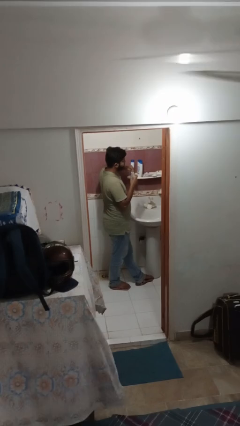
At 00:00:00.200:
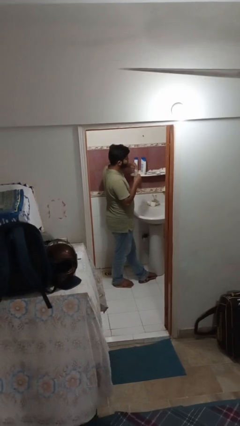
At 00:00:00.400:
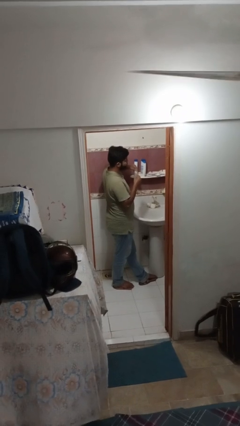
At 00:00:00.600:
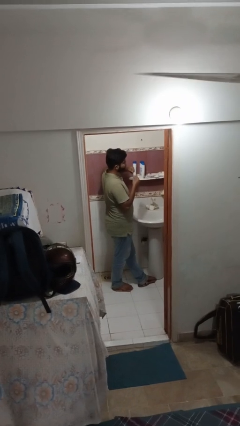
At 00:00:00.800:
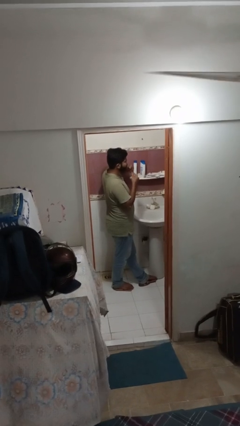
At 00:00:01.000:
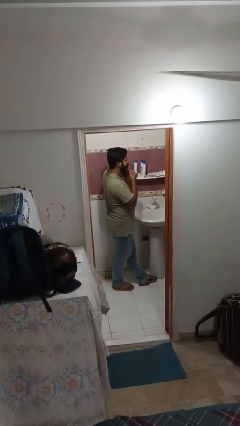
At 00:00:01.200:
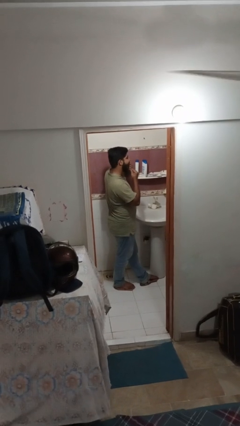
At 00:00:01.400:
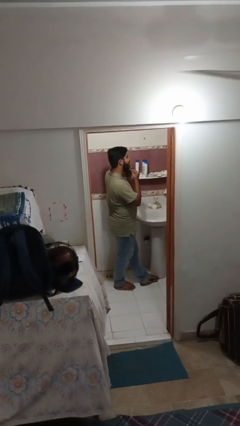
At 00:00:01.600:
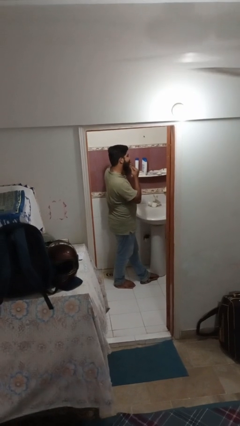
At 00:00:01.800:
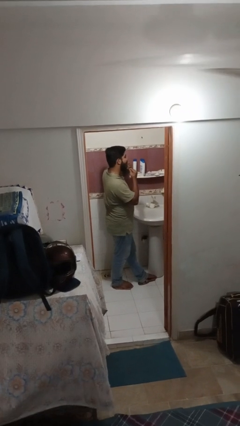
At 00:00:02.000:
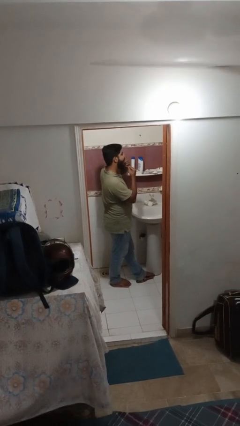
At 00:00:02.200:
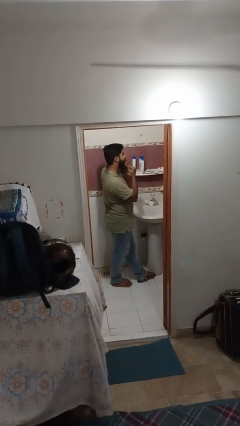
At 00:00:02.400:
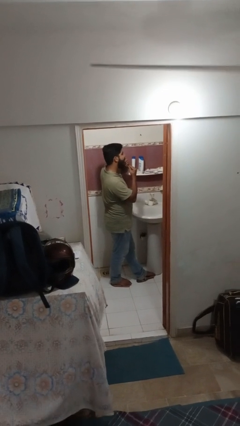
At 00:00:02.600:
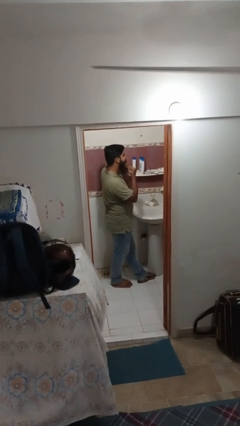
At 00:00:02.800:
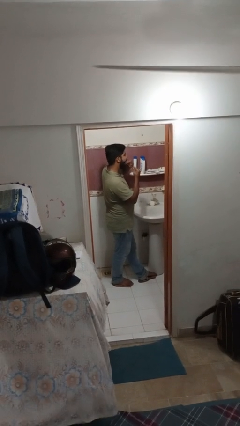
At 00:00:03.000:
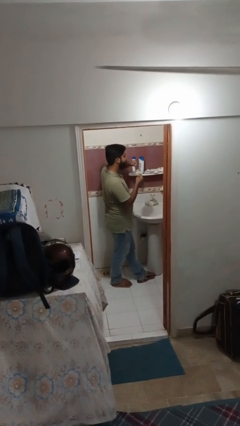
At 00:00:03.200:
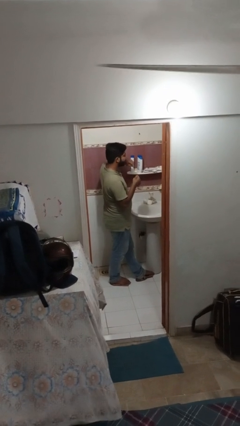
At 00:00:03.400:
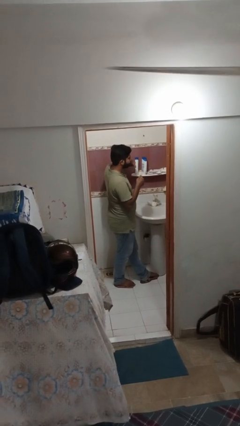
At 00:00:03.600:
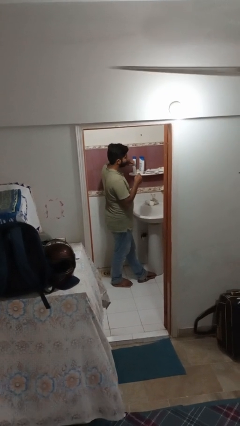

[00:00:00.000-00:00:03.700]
person flosses

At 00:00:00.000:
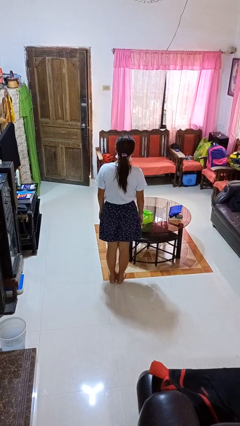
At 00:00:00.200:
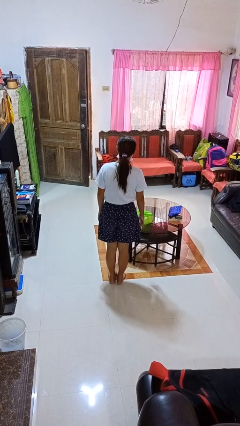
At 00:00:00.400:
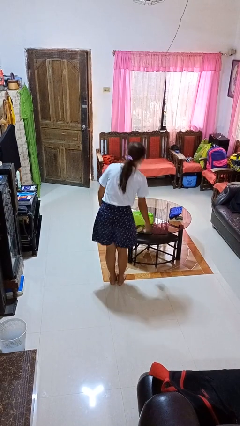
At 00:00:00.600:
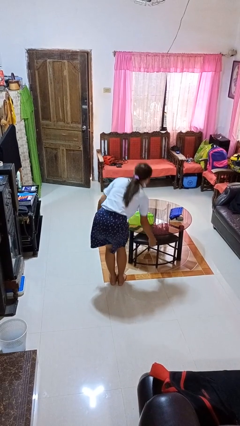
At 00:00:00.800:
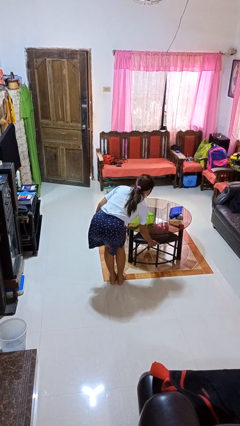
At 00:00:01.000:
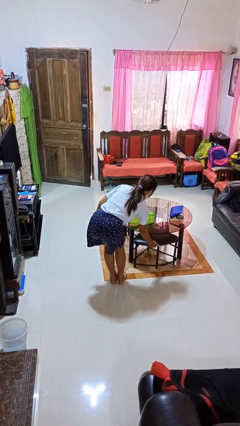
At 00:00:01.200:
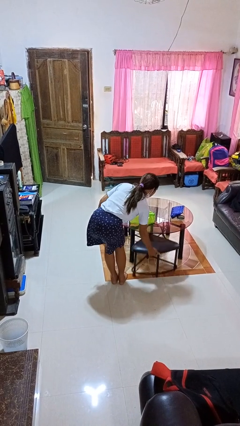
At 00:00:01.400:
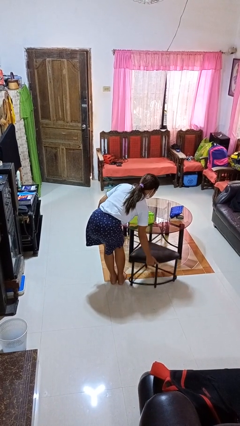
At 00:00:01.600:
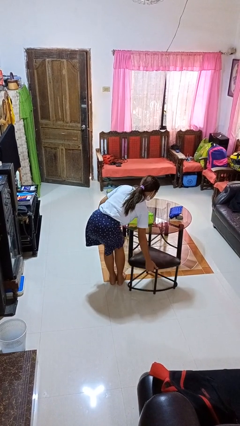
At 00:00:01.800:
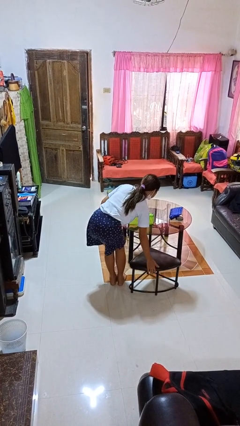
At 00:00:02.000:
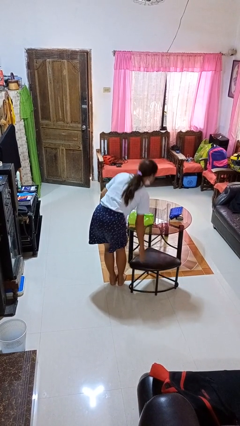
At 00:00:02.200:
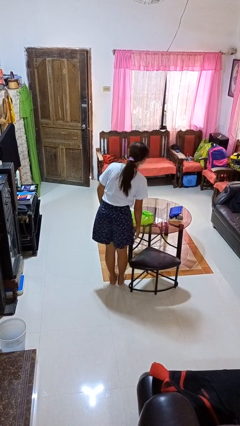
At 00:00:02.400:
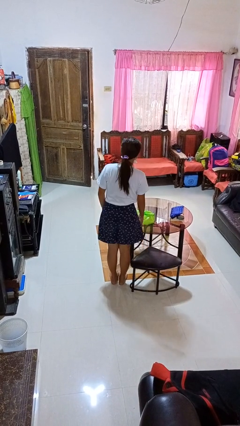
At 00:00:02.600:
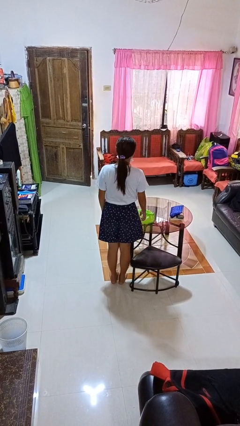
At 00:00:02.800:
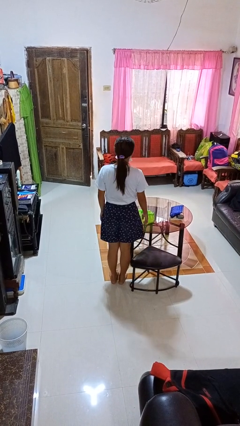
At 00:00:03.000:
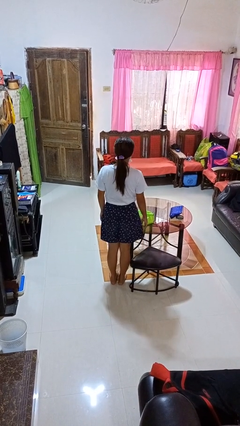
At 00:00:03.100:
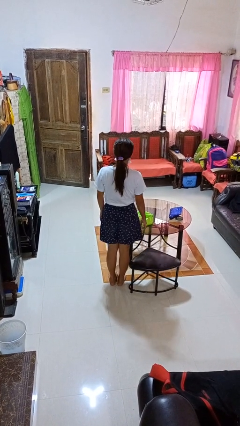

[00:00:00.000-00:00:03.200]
person pulls out chair

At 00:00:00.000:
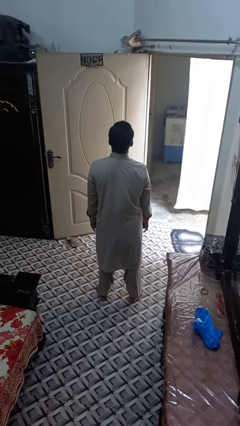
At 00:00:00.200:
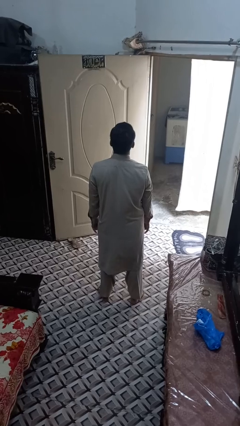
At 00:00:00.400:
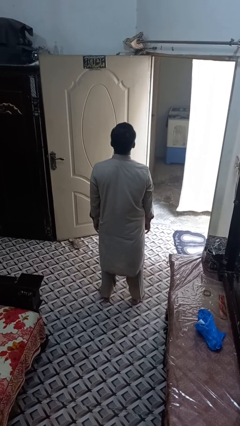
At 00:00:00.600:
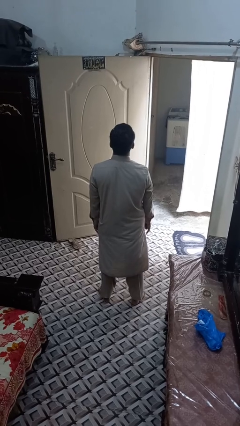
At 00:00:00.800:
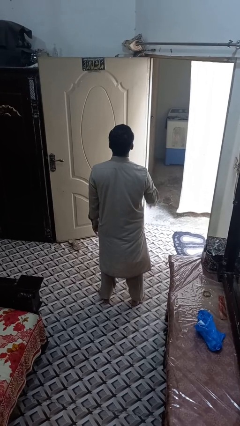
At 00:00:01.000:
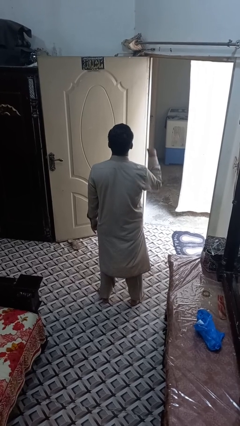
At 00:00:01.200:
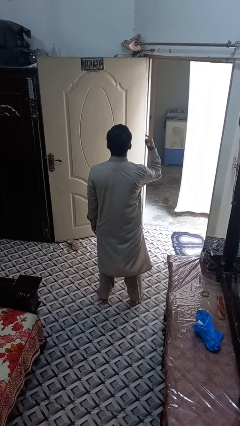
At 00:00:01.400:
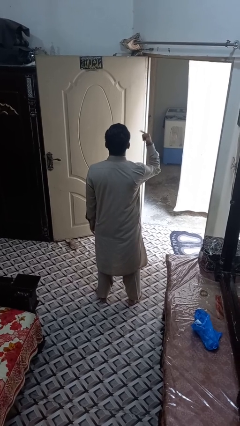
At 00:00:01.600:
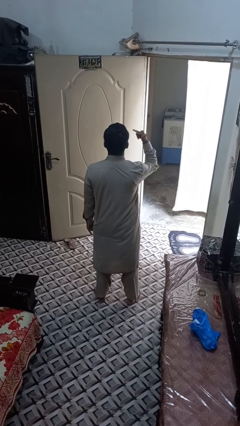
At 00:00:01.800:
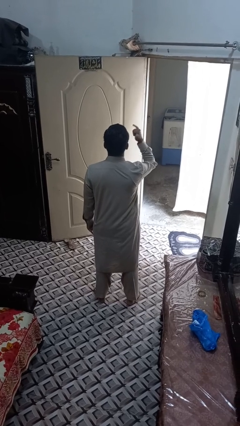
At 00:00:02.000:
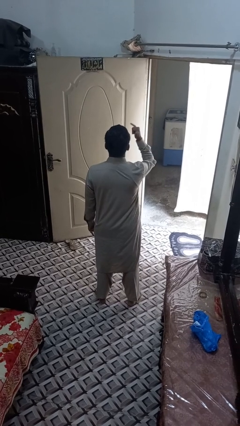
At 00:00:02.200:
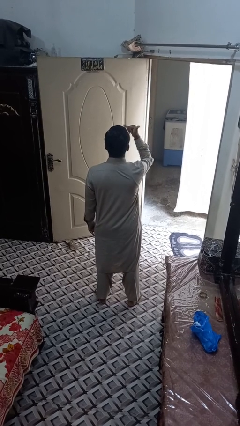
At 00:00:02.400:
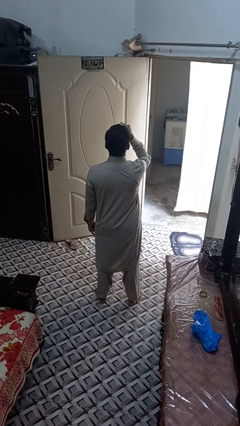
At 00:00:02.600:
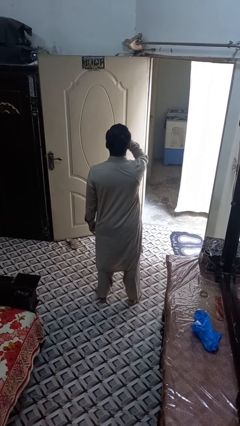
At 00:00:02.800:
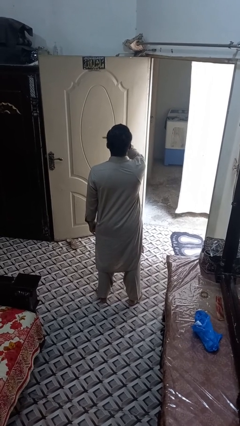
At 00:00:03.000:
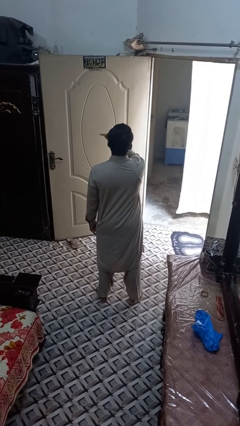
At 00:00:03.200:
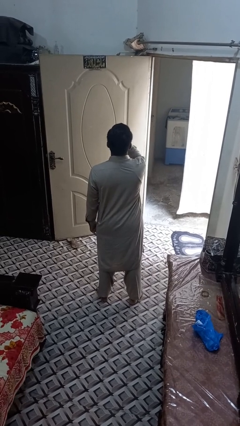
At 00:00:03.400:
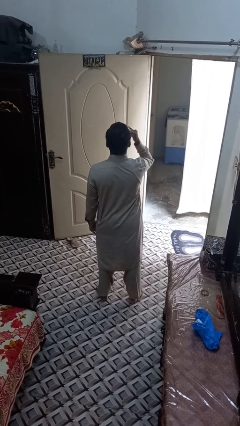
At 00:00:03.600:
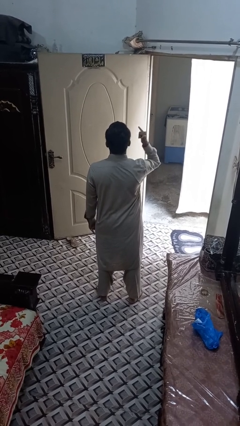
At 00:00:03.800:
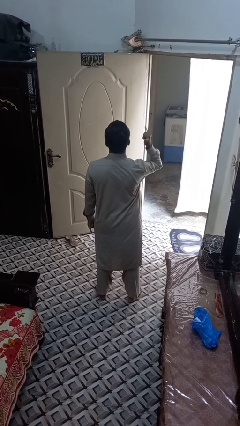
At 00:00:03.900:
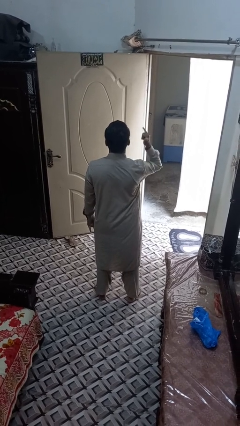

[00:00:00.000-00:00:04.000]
person gestures hang loose

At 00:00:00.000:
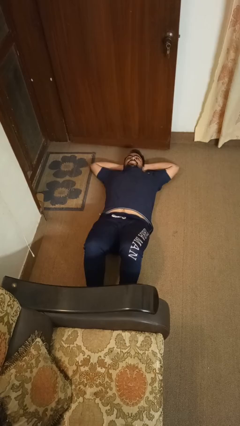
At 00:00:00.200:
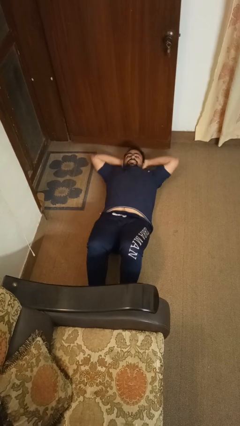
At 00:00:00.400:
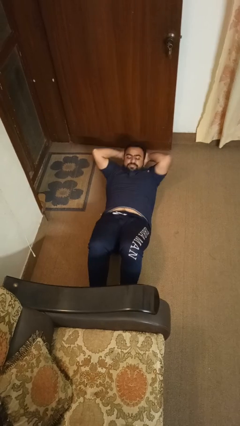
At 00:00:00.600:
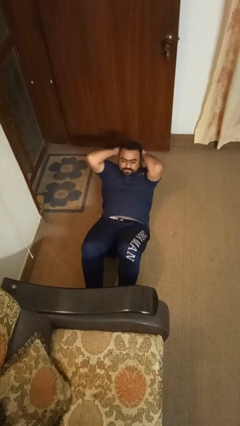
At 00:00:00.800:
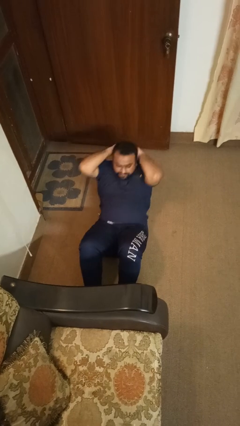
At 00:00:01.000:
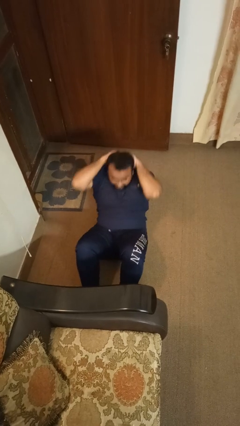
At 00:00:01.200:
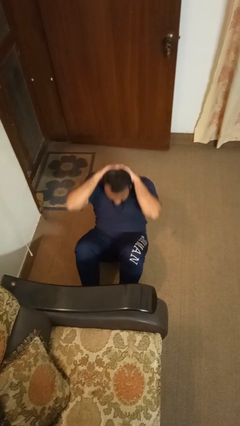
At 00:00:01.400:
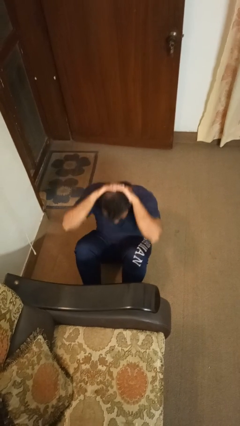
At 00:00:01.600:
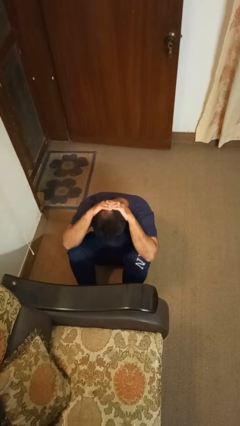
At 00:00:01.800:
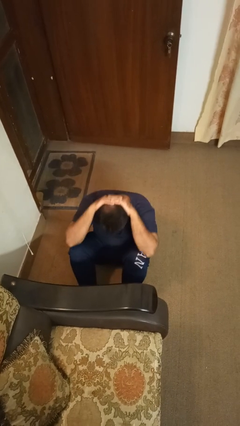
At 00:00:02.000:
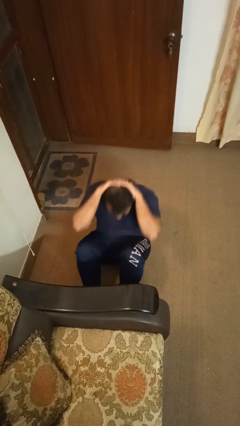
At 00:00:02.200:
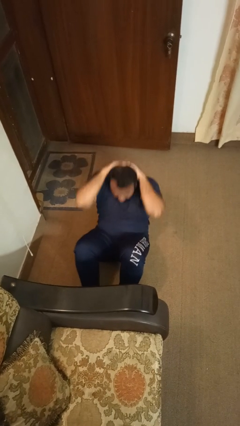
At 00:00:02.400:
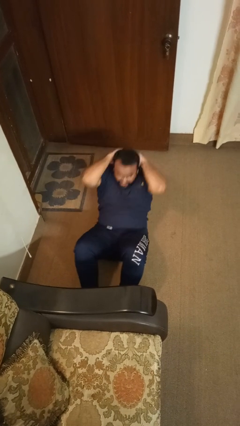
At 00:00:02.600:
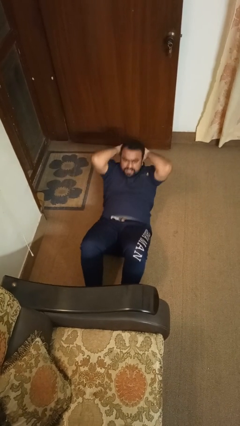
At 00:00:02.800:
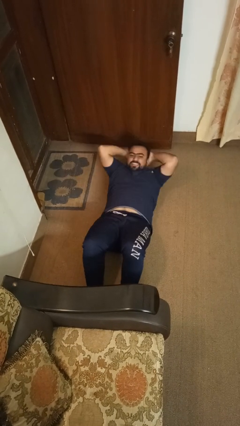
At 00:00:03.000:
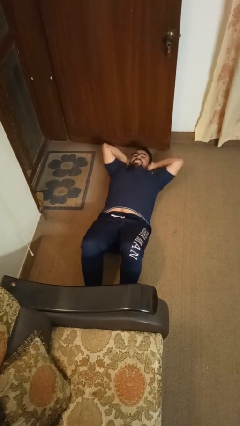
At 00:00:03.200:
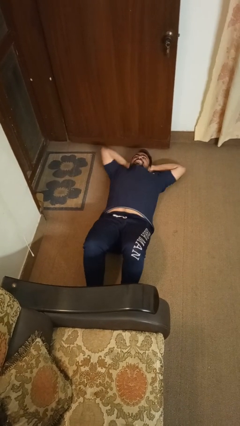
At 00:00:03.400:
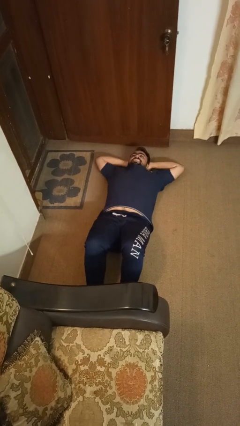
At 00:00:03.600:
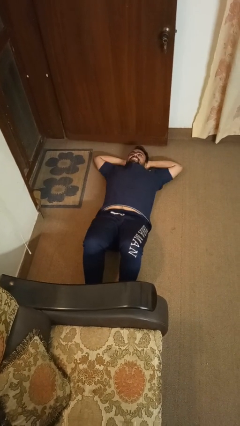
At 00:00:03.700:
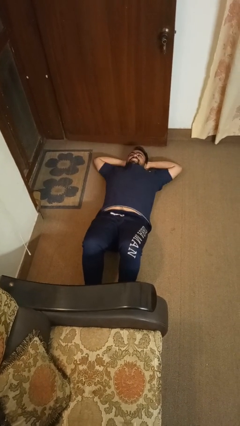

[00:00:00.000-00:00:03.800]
person exercises with situp

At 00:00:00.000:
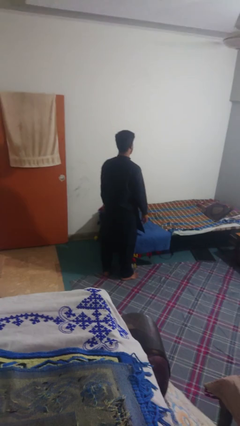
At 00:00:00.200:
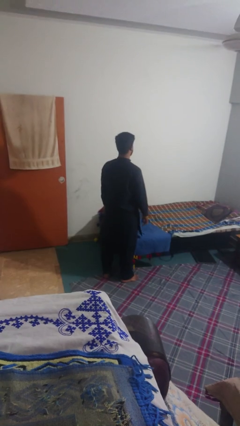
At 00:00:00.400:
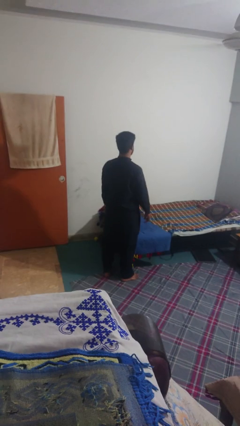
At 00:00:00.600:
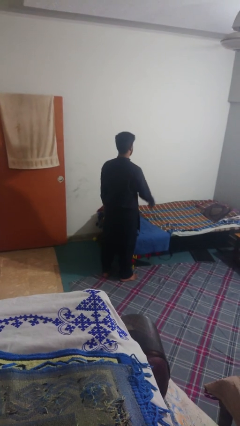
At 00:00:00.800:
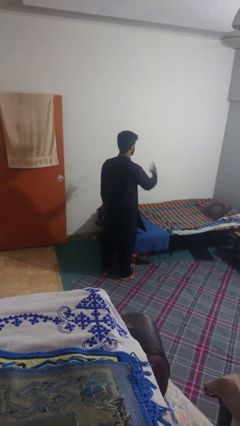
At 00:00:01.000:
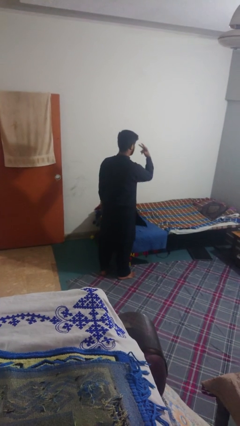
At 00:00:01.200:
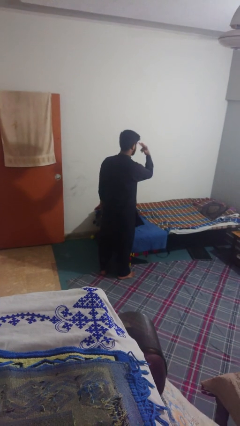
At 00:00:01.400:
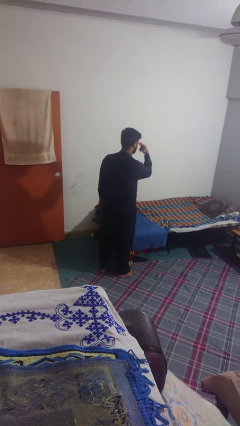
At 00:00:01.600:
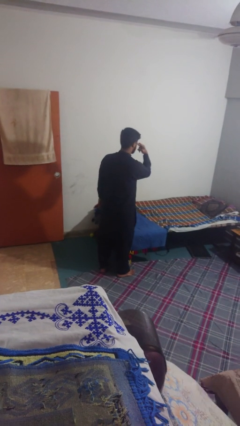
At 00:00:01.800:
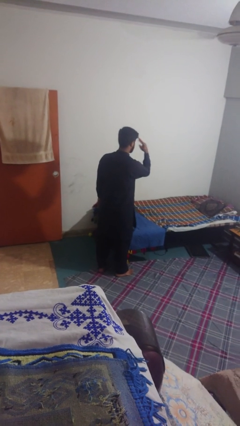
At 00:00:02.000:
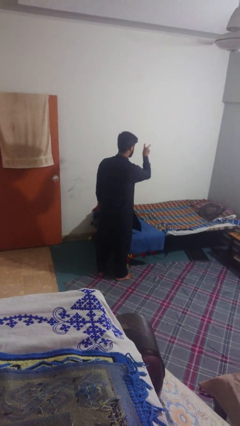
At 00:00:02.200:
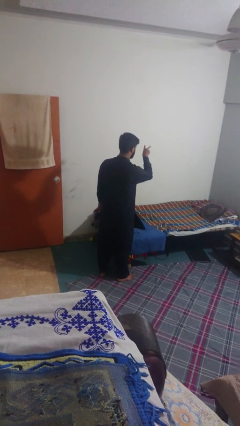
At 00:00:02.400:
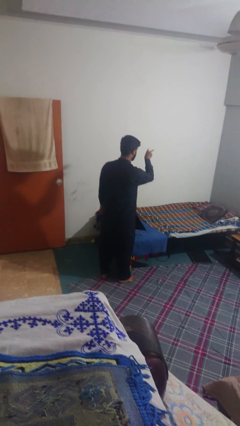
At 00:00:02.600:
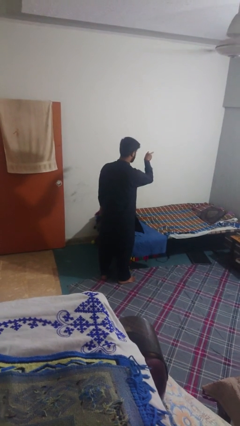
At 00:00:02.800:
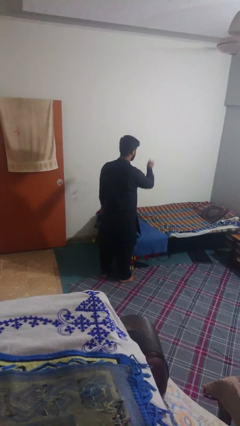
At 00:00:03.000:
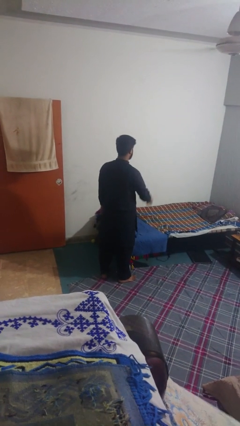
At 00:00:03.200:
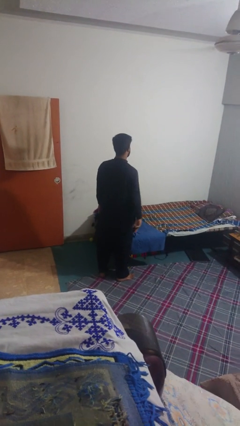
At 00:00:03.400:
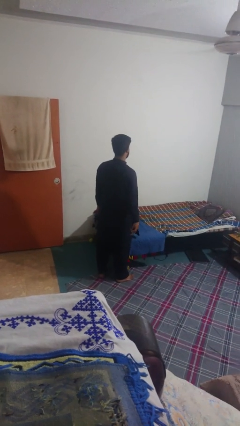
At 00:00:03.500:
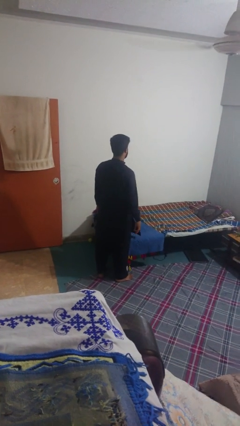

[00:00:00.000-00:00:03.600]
person gestures watch closely
